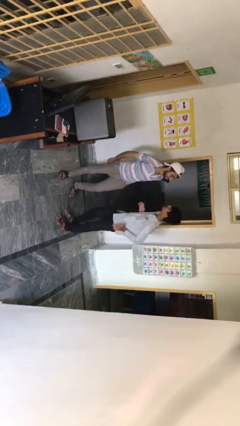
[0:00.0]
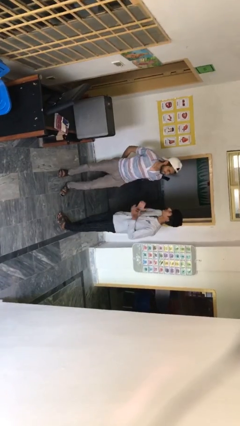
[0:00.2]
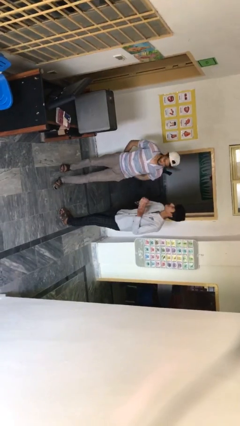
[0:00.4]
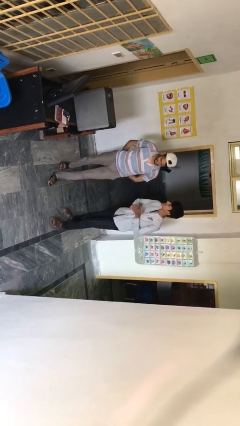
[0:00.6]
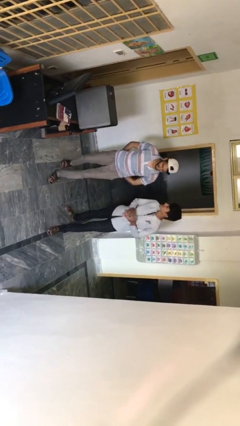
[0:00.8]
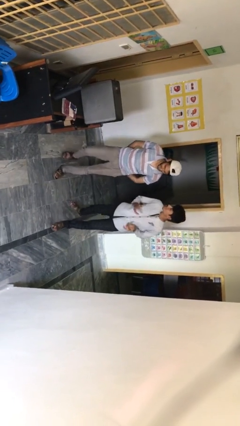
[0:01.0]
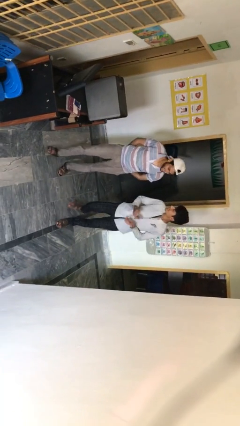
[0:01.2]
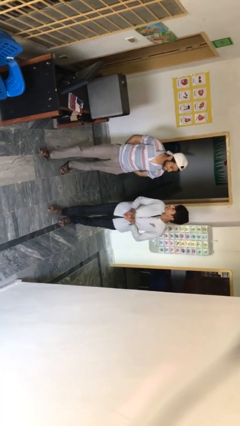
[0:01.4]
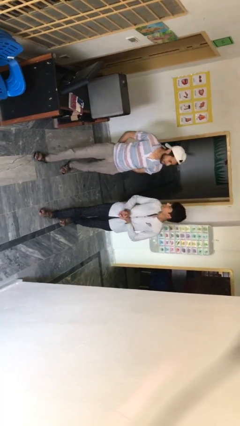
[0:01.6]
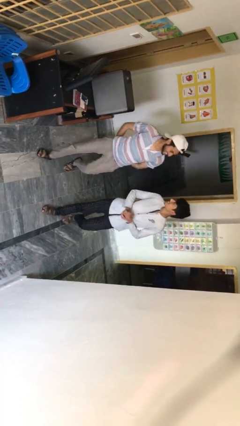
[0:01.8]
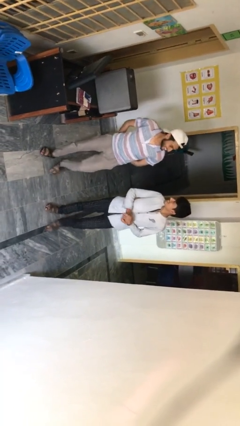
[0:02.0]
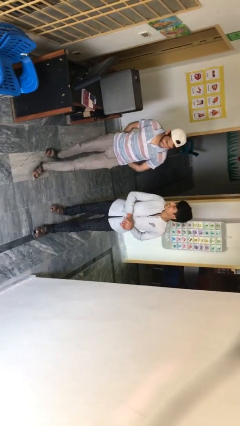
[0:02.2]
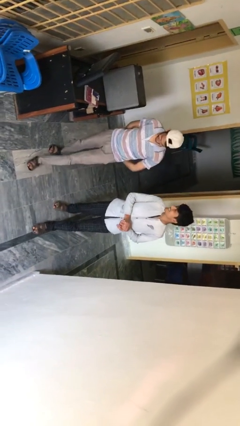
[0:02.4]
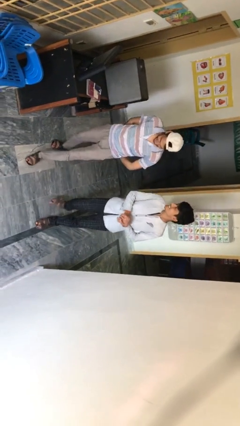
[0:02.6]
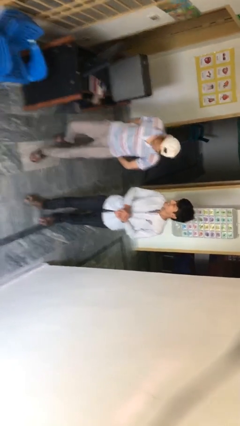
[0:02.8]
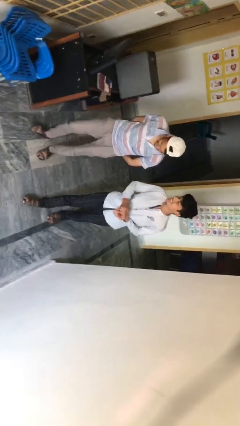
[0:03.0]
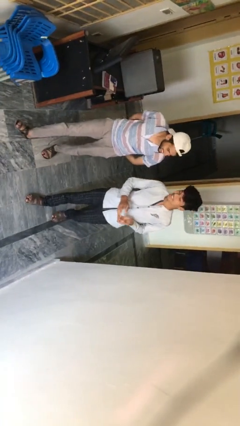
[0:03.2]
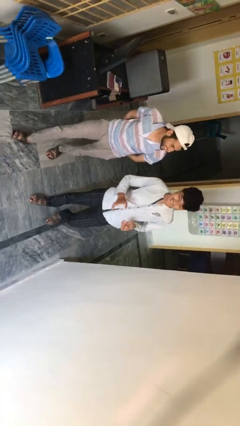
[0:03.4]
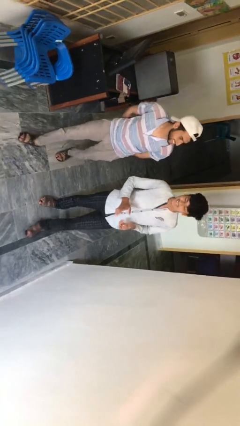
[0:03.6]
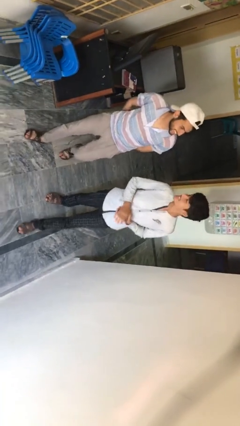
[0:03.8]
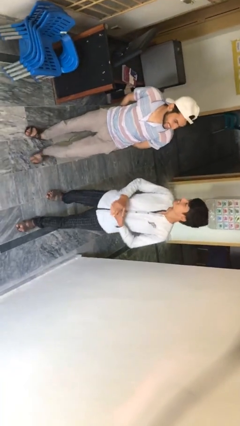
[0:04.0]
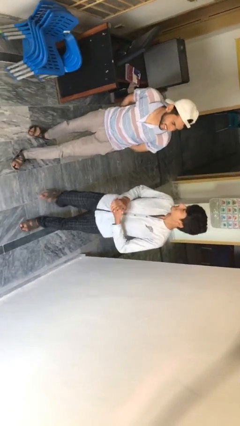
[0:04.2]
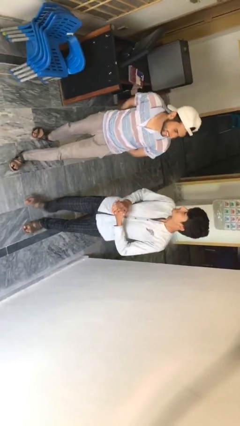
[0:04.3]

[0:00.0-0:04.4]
person talks to person

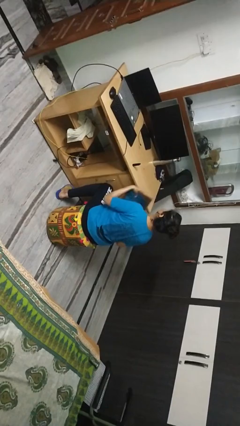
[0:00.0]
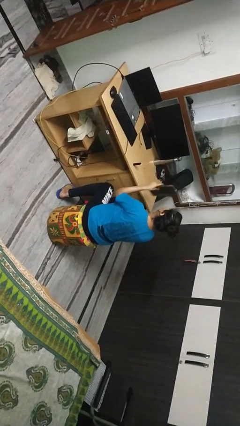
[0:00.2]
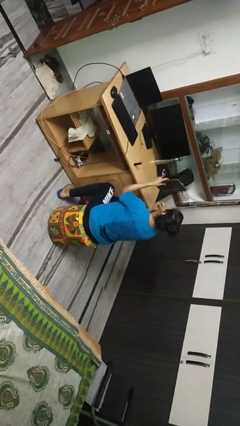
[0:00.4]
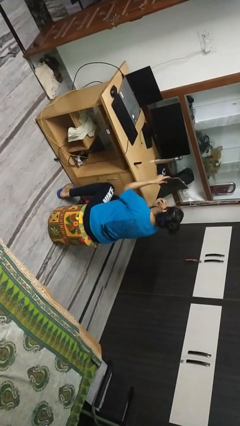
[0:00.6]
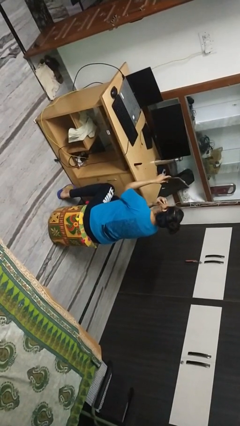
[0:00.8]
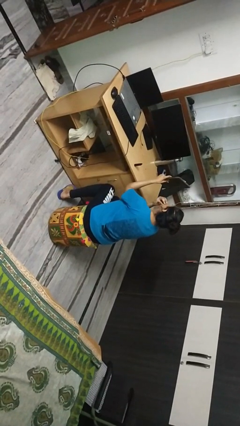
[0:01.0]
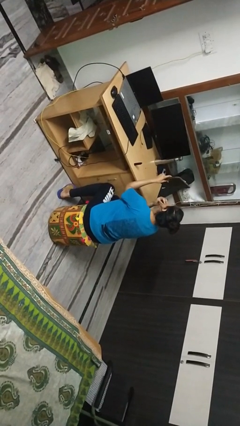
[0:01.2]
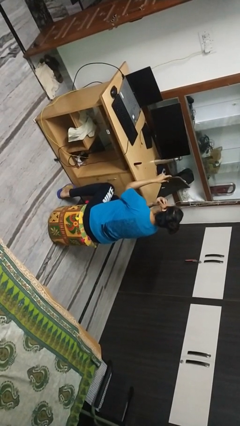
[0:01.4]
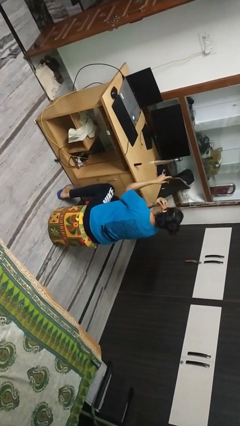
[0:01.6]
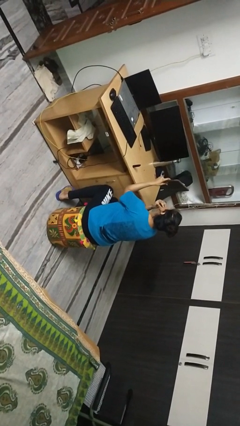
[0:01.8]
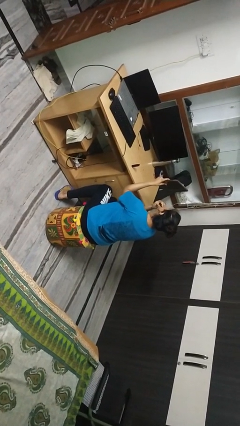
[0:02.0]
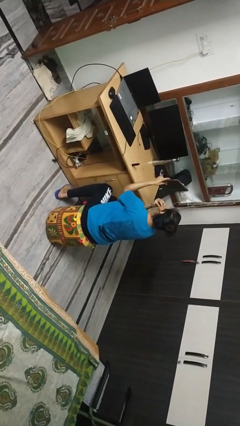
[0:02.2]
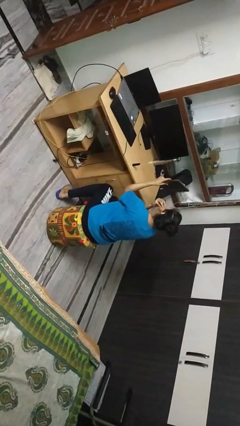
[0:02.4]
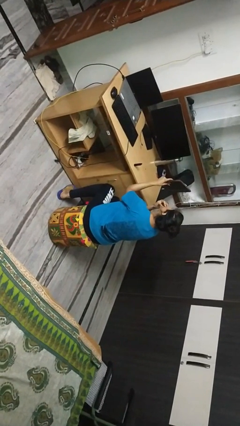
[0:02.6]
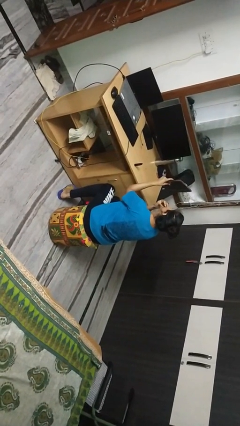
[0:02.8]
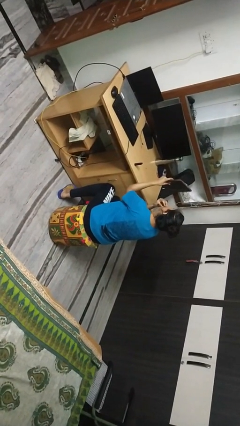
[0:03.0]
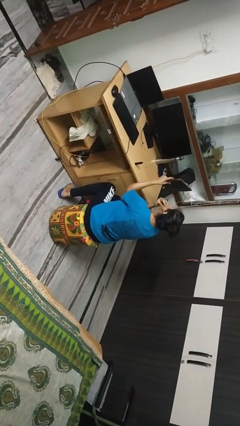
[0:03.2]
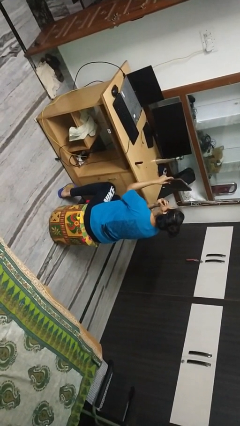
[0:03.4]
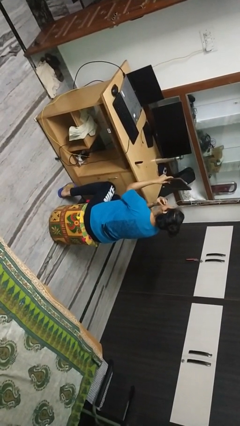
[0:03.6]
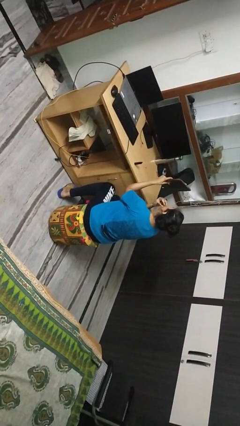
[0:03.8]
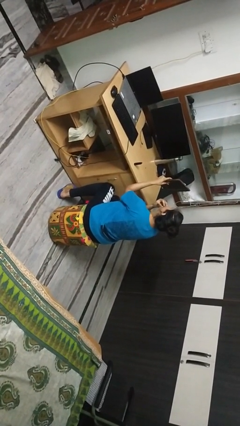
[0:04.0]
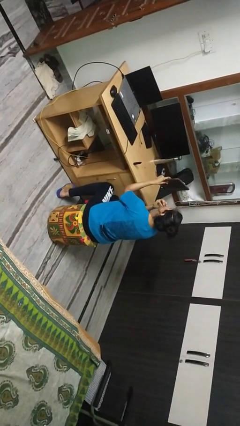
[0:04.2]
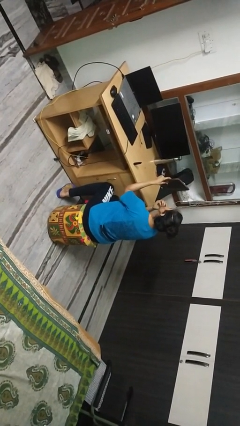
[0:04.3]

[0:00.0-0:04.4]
person applies lip makeup

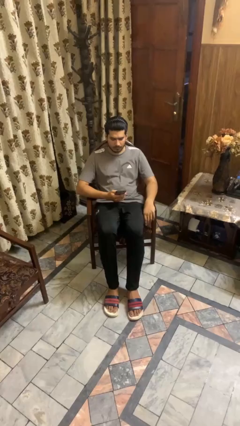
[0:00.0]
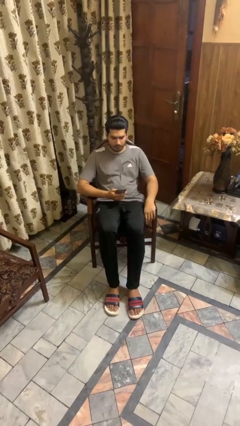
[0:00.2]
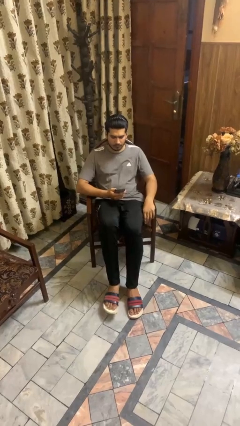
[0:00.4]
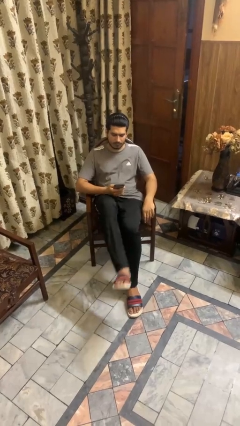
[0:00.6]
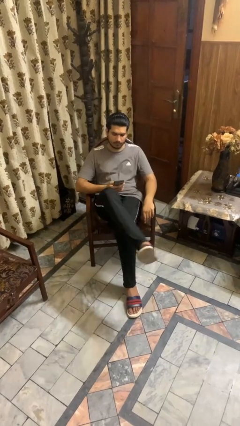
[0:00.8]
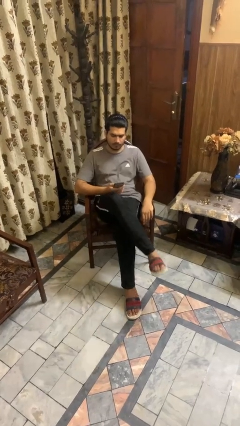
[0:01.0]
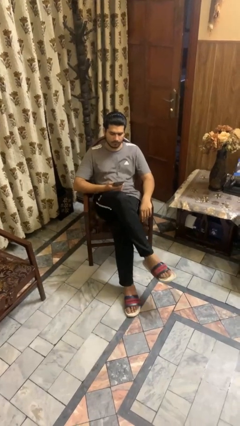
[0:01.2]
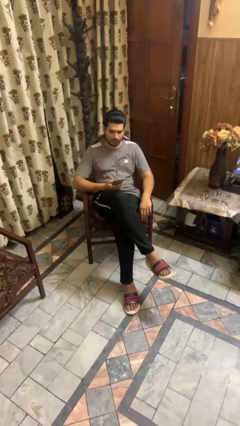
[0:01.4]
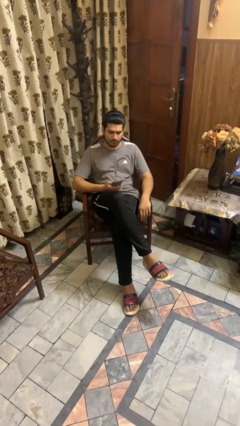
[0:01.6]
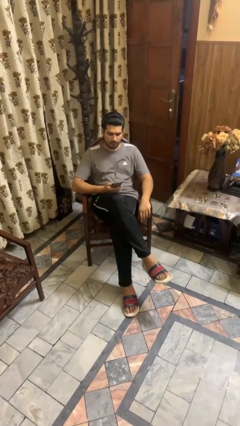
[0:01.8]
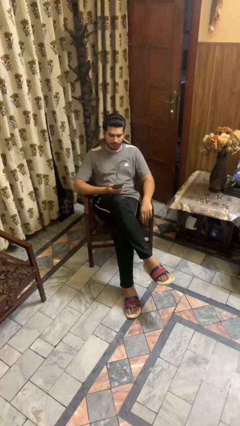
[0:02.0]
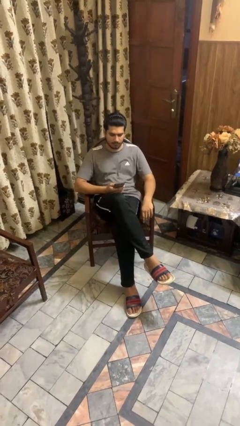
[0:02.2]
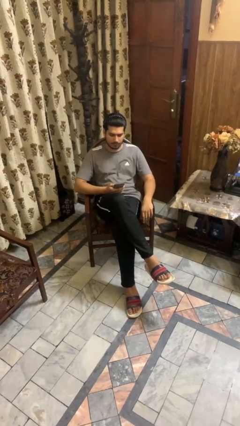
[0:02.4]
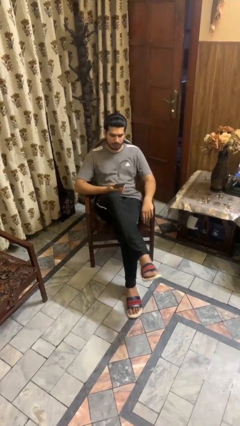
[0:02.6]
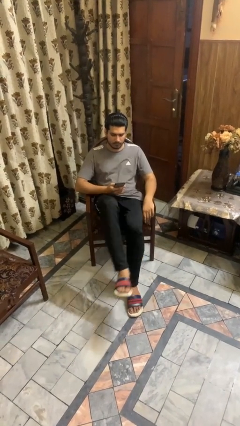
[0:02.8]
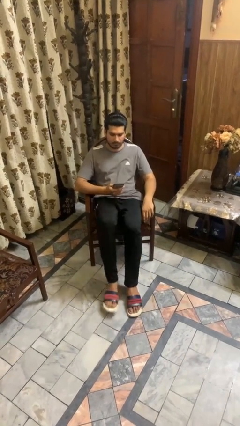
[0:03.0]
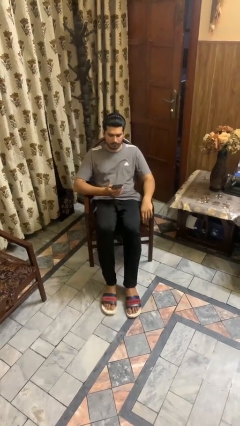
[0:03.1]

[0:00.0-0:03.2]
person crosses legs

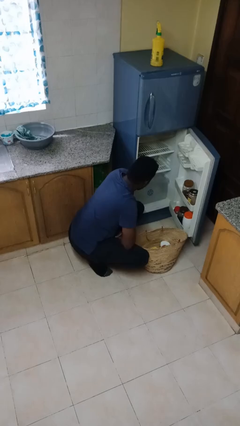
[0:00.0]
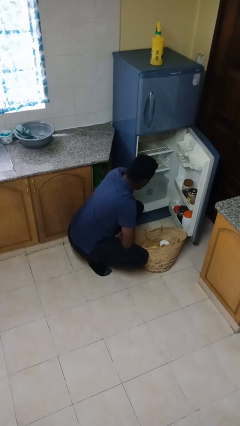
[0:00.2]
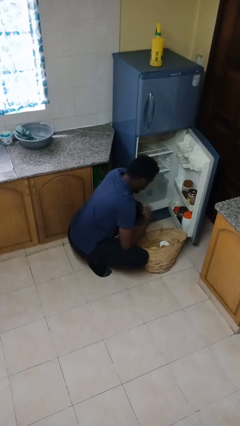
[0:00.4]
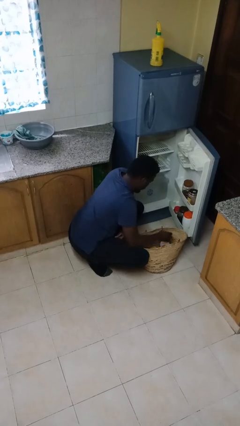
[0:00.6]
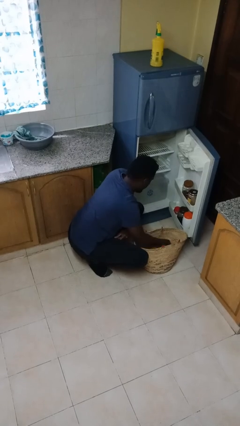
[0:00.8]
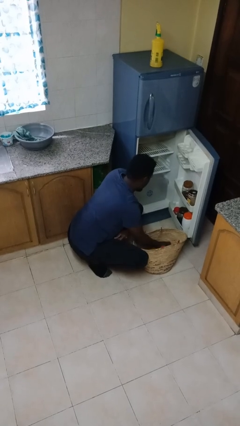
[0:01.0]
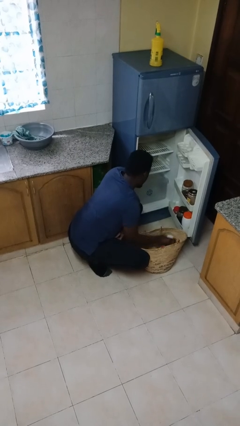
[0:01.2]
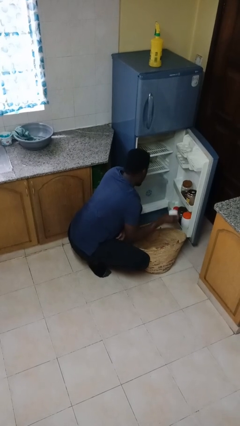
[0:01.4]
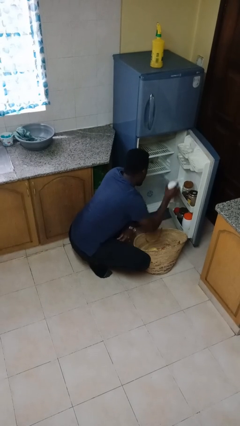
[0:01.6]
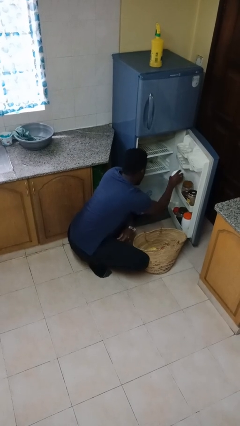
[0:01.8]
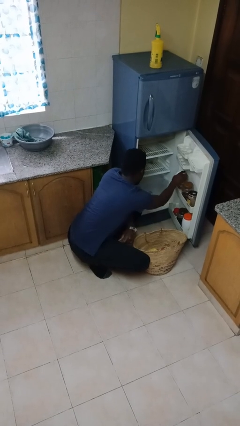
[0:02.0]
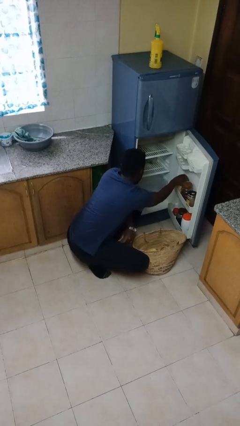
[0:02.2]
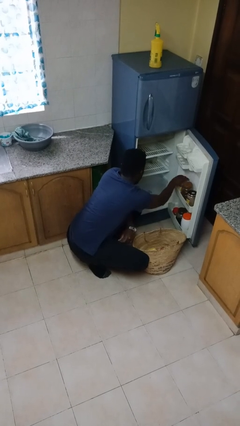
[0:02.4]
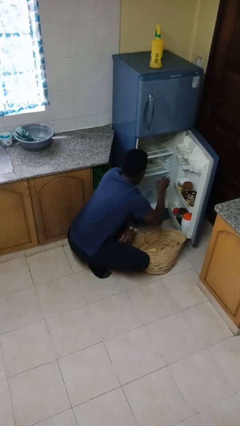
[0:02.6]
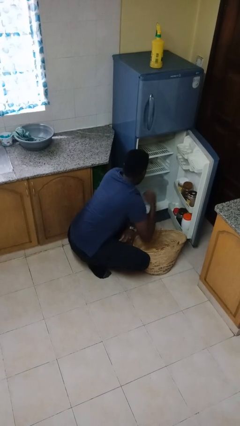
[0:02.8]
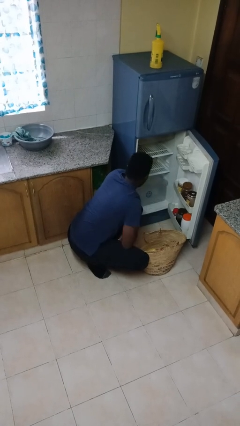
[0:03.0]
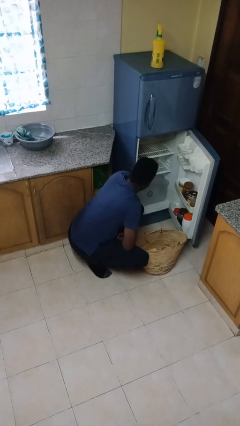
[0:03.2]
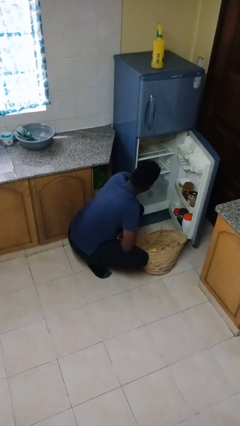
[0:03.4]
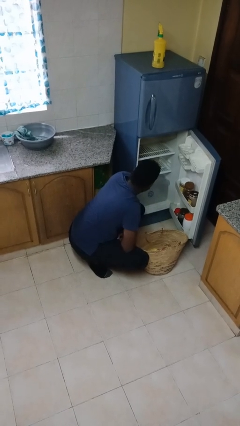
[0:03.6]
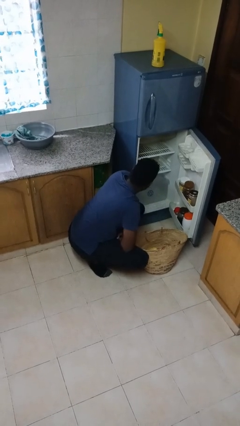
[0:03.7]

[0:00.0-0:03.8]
person loads groceries into refrigerator

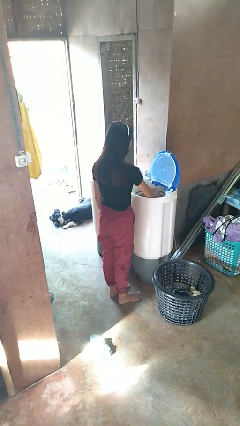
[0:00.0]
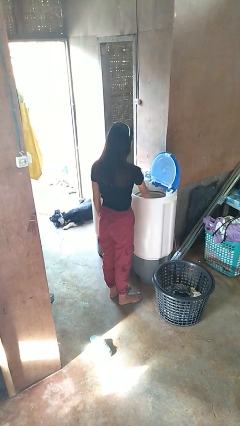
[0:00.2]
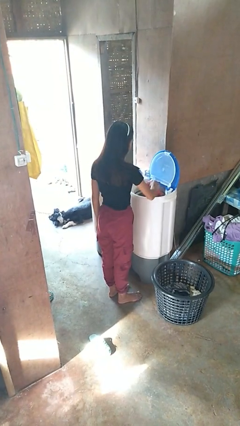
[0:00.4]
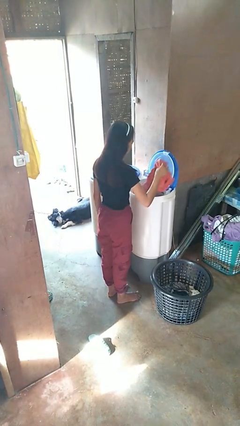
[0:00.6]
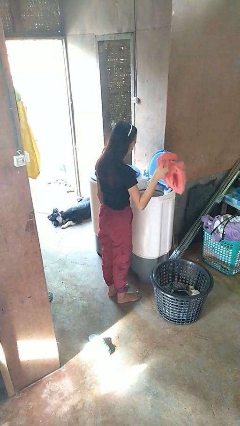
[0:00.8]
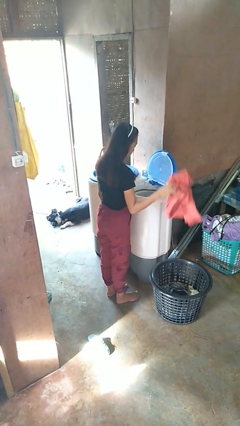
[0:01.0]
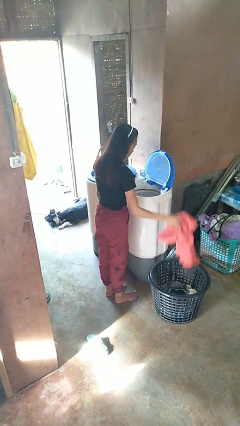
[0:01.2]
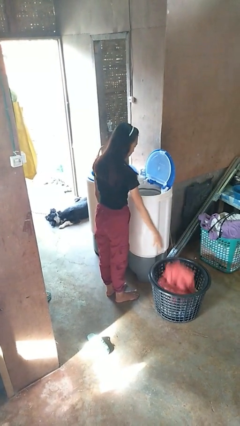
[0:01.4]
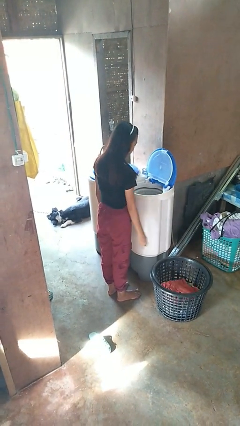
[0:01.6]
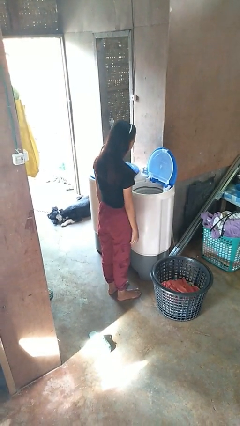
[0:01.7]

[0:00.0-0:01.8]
person unloads clotheswasher
